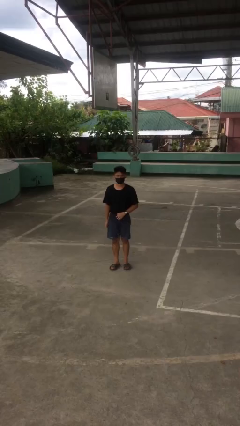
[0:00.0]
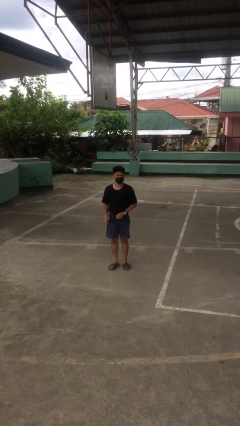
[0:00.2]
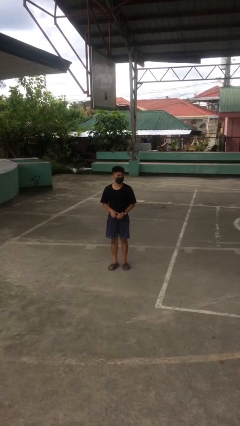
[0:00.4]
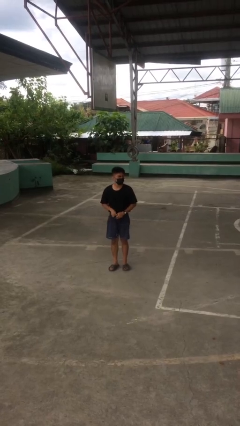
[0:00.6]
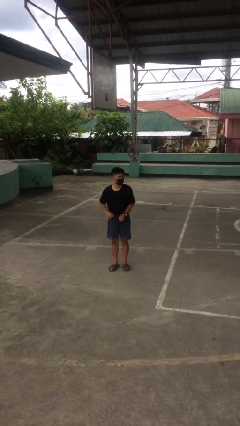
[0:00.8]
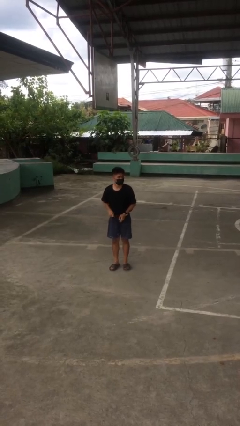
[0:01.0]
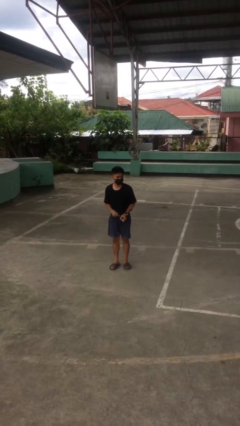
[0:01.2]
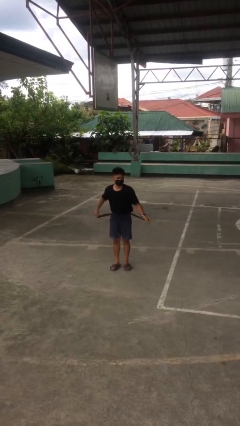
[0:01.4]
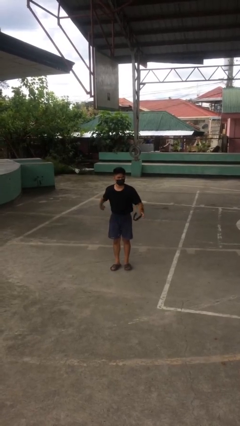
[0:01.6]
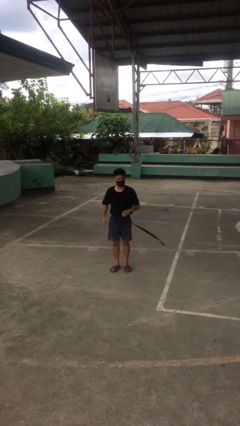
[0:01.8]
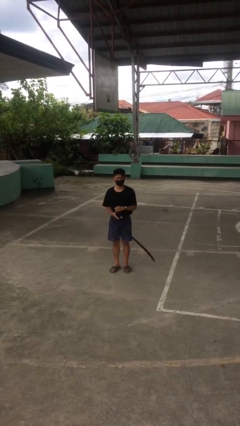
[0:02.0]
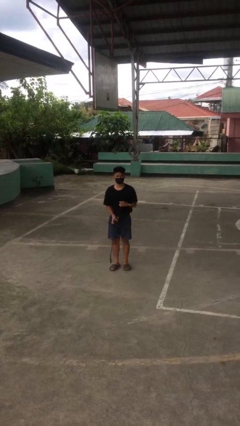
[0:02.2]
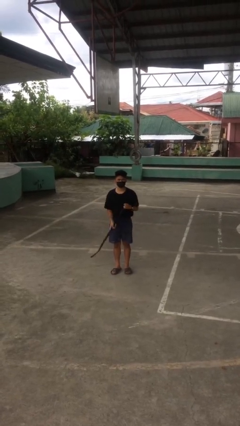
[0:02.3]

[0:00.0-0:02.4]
person takes off belt

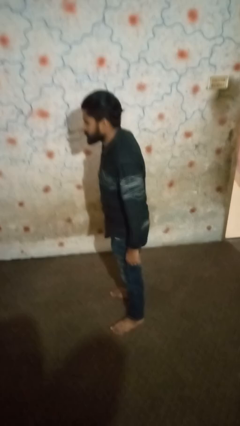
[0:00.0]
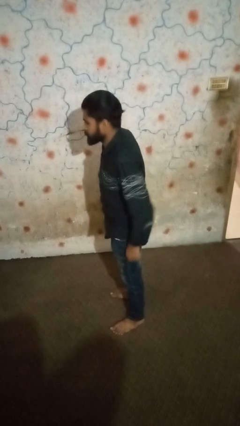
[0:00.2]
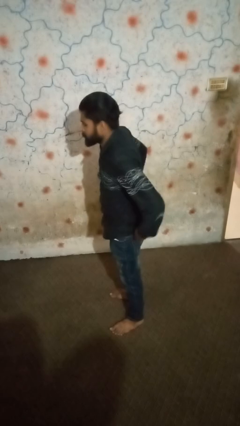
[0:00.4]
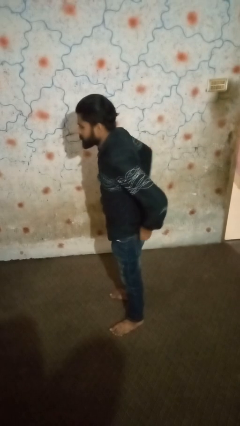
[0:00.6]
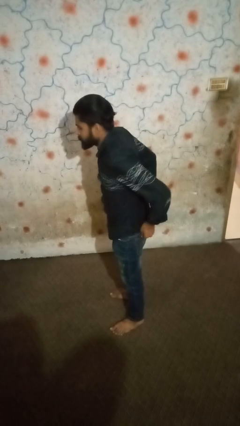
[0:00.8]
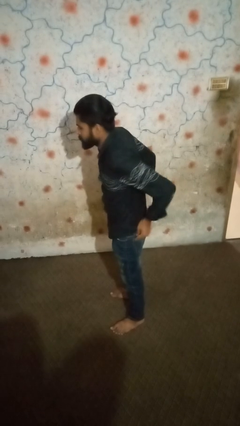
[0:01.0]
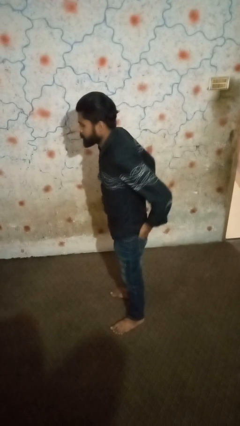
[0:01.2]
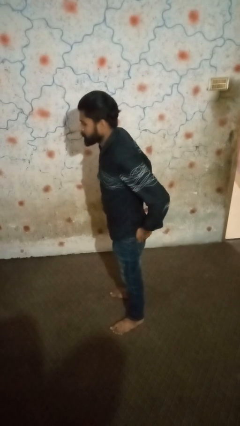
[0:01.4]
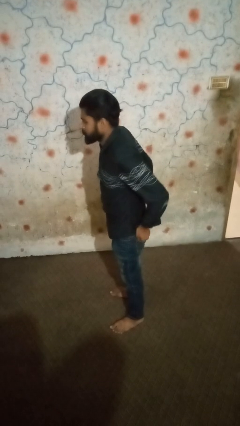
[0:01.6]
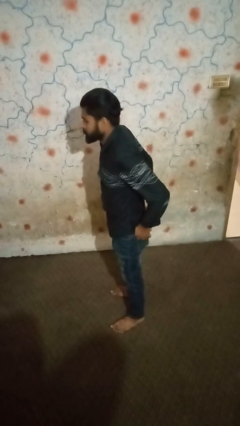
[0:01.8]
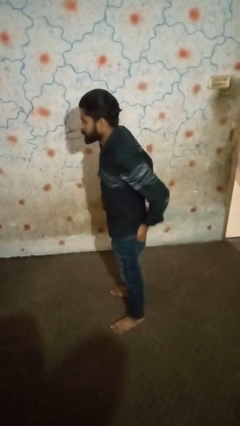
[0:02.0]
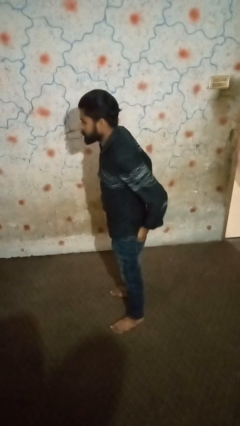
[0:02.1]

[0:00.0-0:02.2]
person puts hands in back pockets

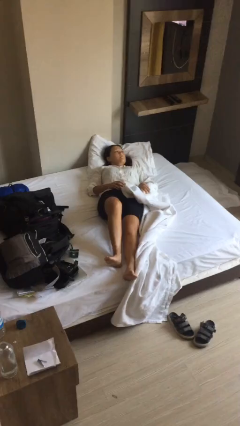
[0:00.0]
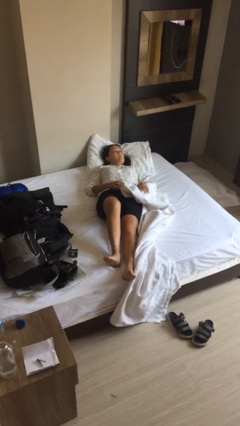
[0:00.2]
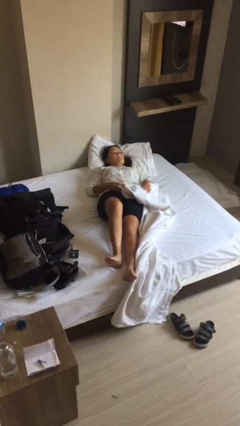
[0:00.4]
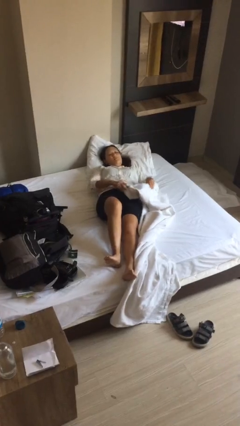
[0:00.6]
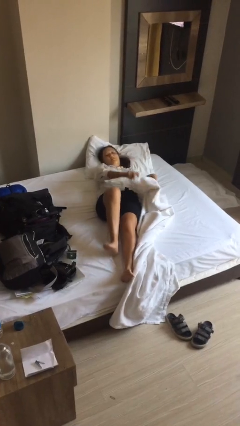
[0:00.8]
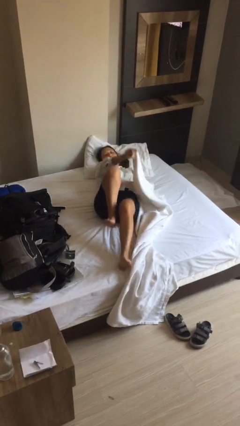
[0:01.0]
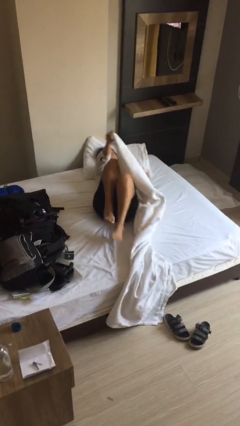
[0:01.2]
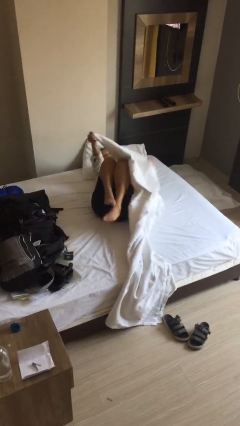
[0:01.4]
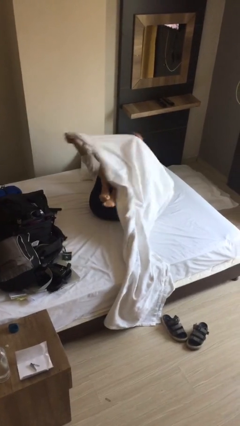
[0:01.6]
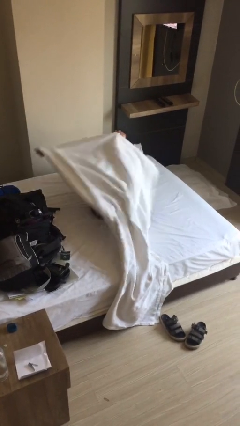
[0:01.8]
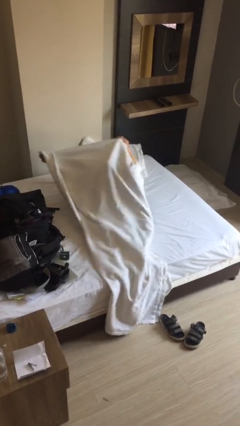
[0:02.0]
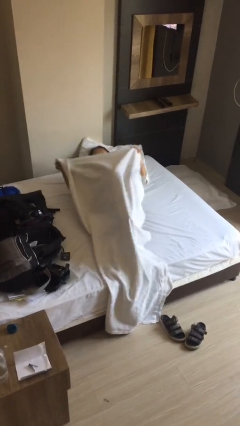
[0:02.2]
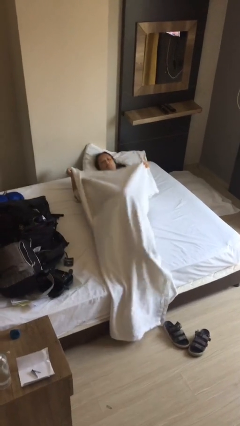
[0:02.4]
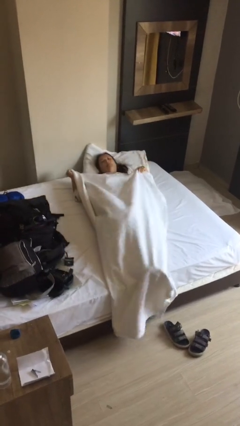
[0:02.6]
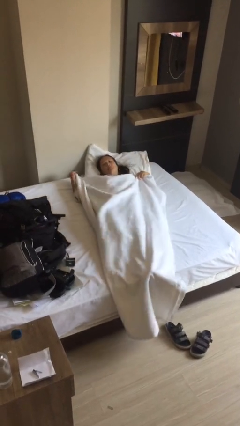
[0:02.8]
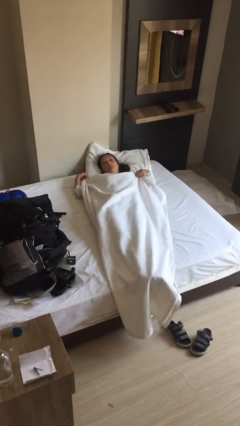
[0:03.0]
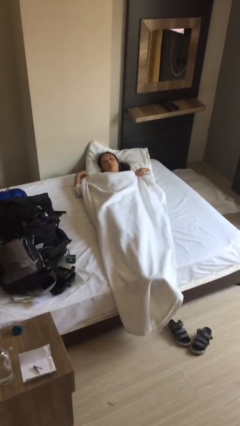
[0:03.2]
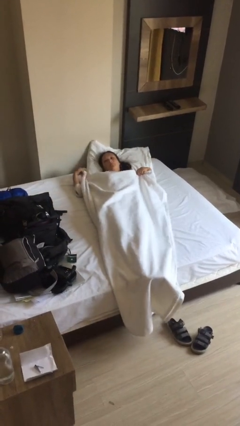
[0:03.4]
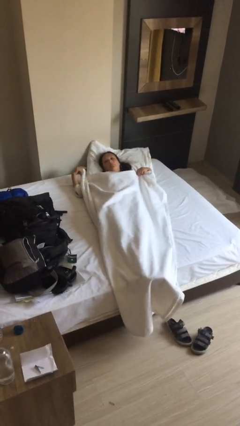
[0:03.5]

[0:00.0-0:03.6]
person covers with bedsheets

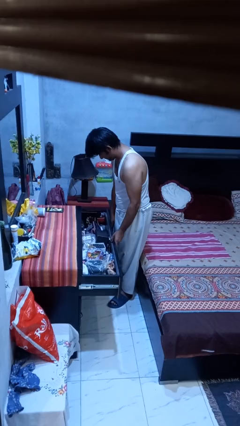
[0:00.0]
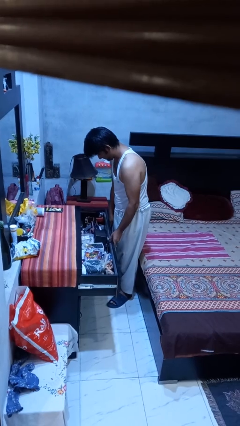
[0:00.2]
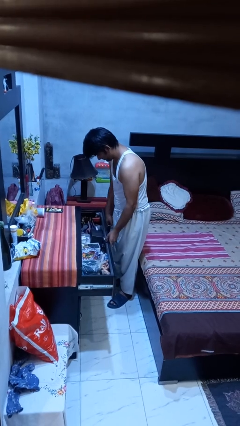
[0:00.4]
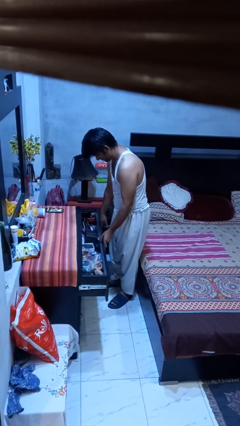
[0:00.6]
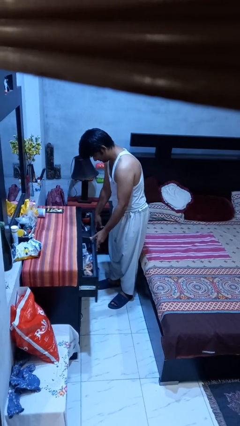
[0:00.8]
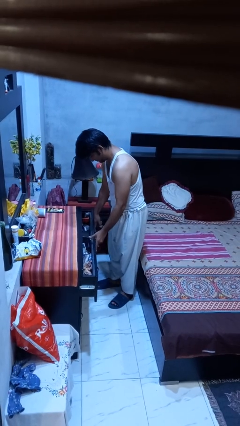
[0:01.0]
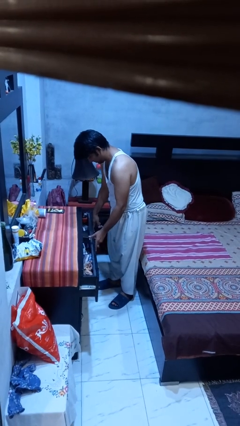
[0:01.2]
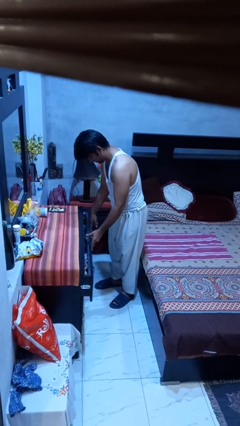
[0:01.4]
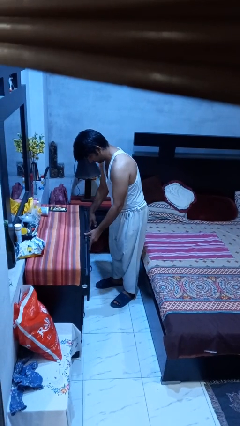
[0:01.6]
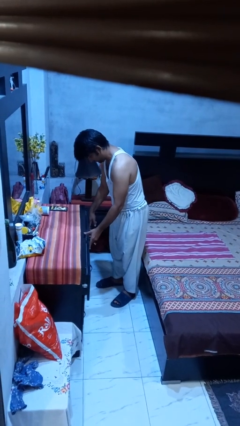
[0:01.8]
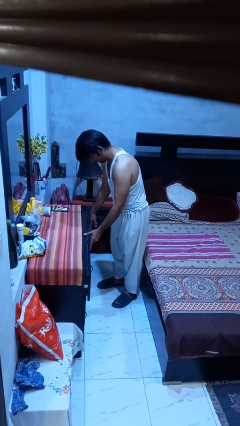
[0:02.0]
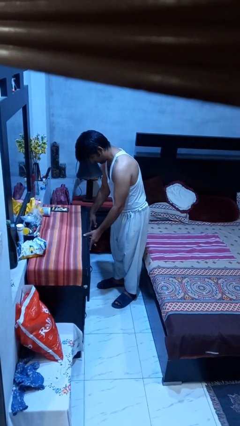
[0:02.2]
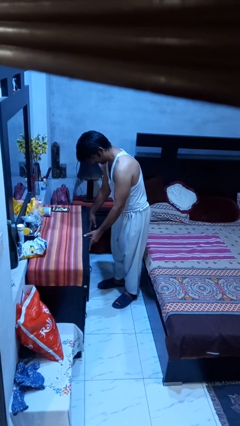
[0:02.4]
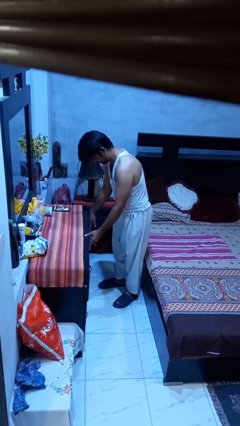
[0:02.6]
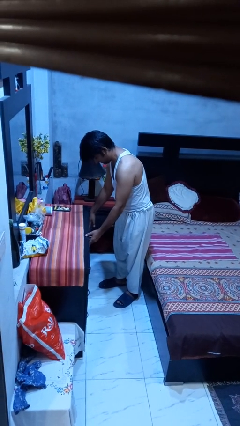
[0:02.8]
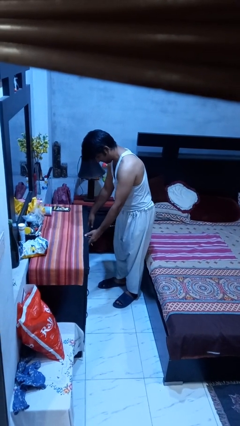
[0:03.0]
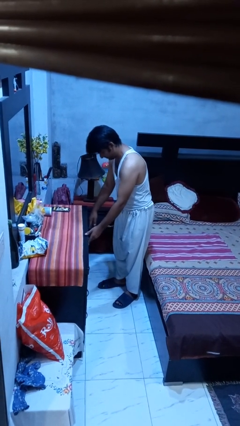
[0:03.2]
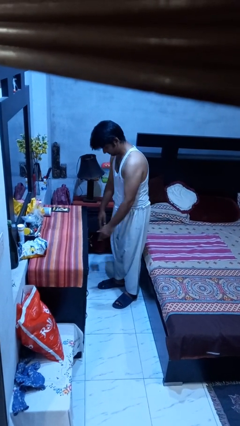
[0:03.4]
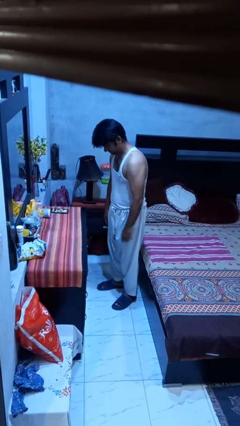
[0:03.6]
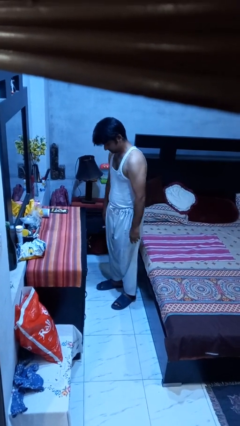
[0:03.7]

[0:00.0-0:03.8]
person closes dresser drawer

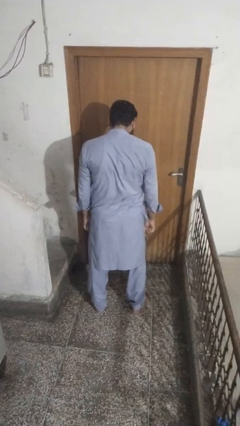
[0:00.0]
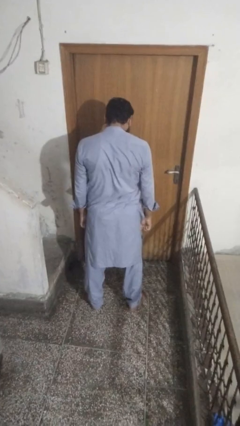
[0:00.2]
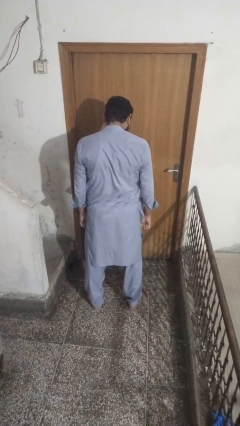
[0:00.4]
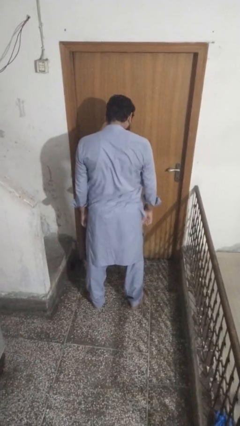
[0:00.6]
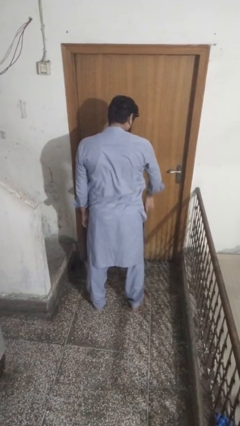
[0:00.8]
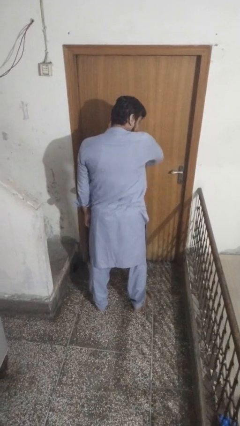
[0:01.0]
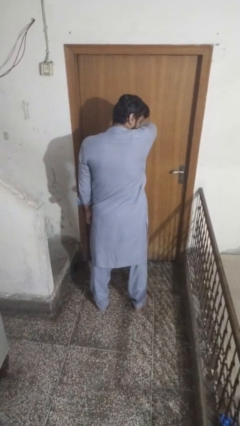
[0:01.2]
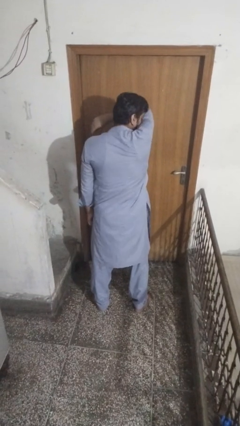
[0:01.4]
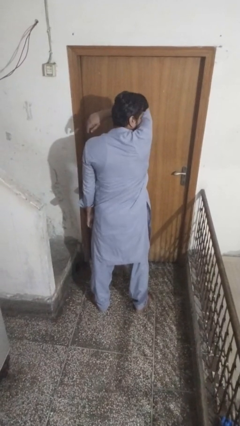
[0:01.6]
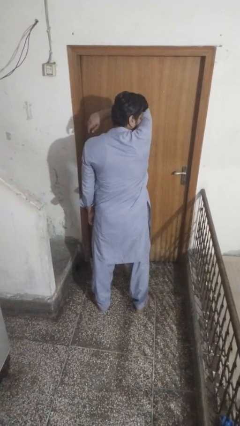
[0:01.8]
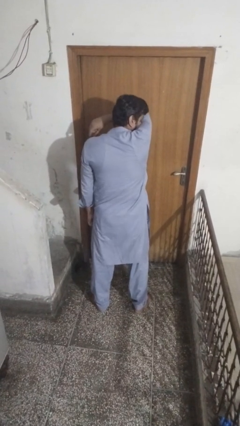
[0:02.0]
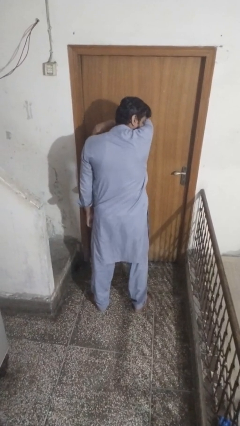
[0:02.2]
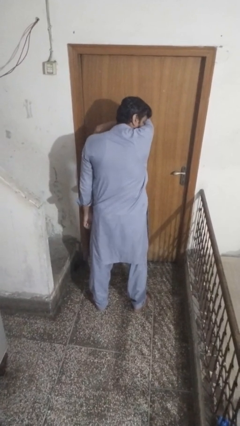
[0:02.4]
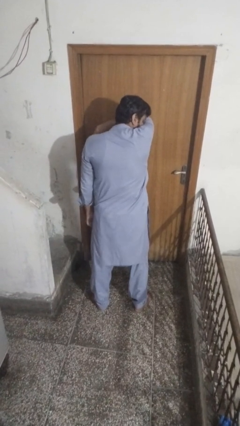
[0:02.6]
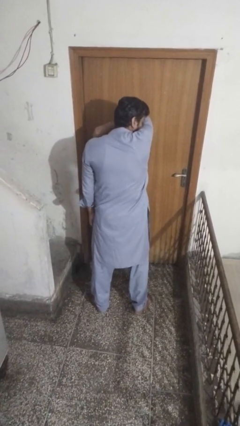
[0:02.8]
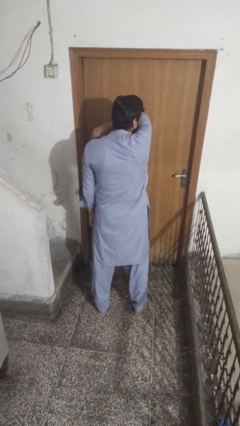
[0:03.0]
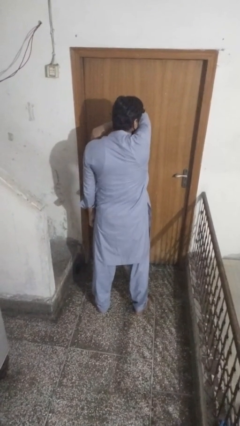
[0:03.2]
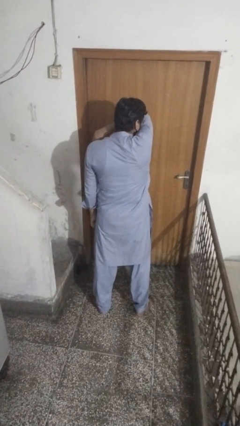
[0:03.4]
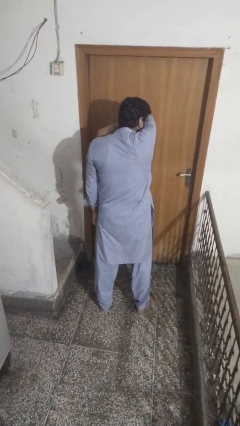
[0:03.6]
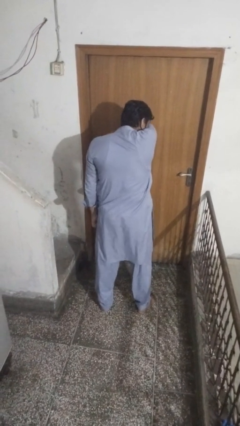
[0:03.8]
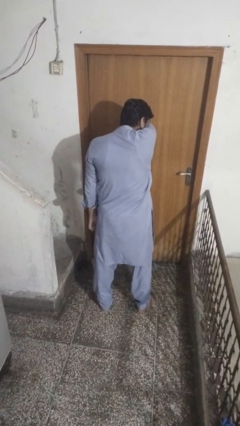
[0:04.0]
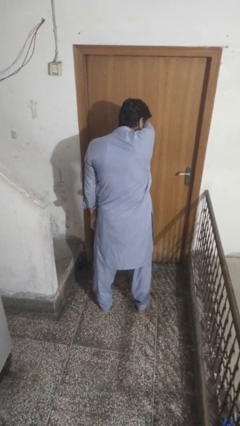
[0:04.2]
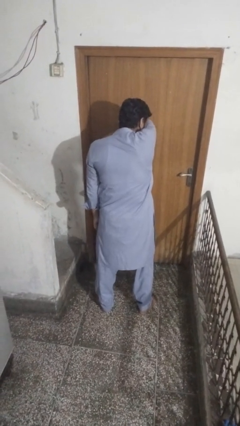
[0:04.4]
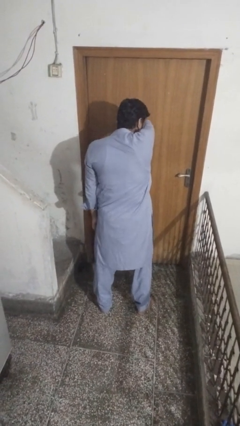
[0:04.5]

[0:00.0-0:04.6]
person sneezes into arm

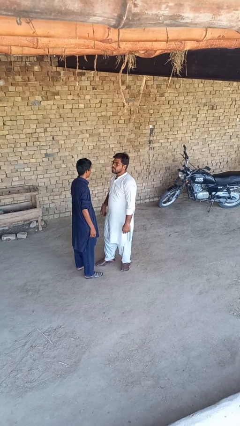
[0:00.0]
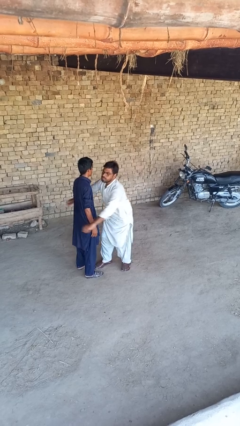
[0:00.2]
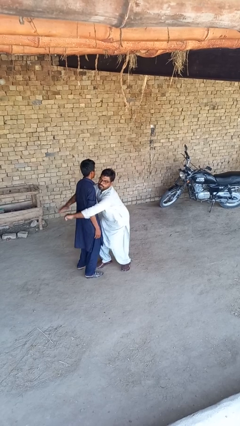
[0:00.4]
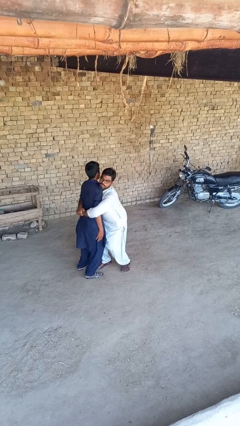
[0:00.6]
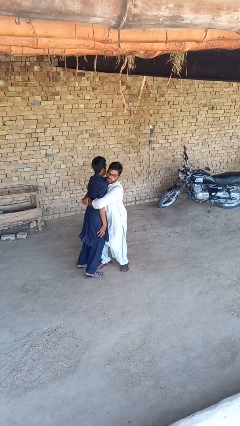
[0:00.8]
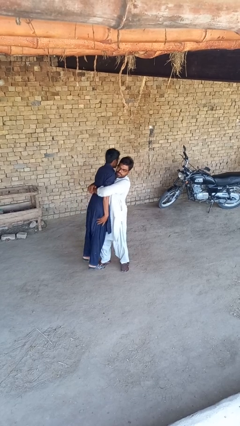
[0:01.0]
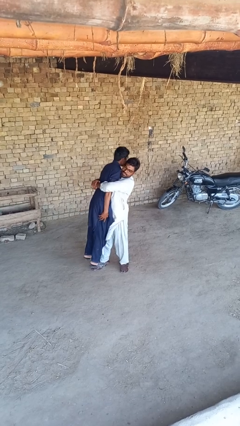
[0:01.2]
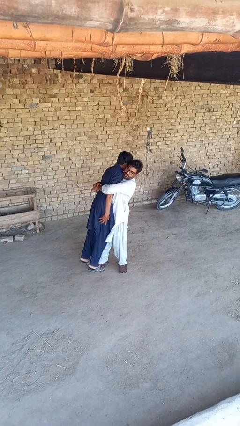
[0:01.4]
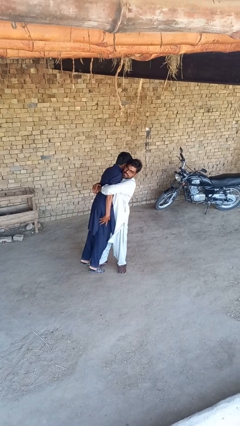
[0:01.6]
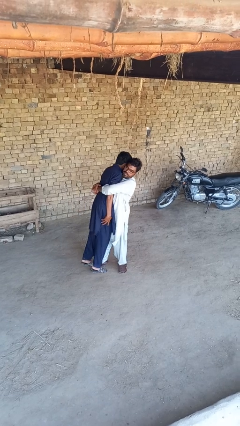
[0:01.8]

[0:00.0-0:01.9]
person picks up person
